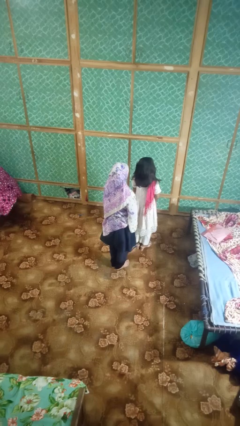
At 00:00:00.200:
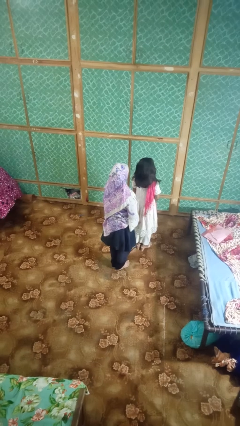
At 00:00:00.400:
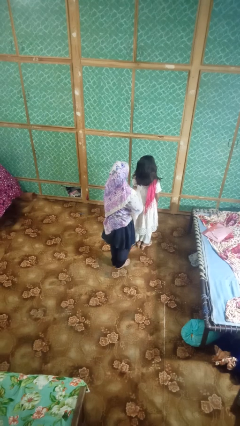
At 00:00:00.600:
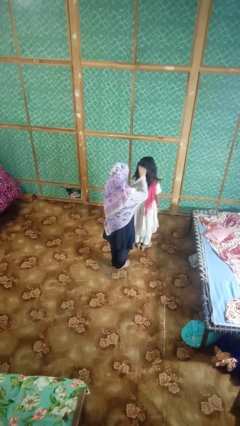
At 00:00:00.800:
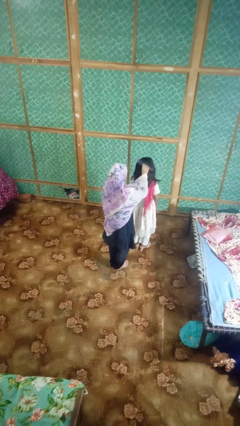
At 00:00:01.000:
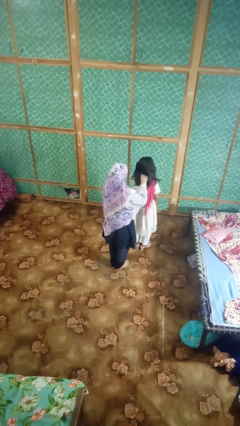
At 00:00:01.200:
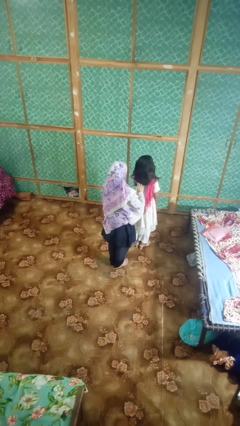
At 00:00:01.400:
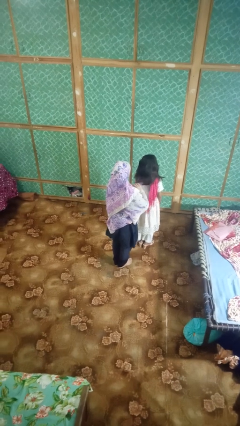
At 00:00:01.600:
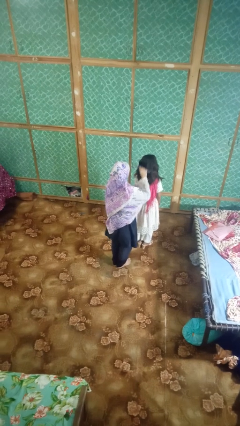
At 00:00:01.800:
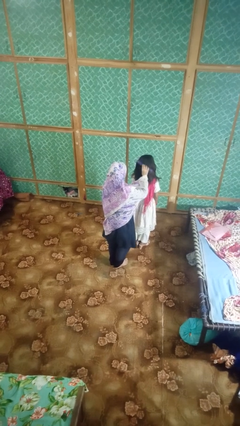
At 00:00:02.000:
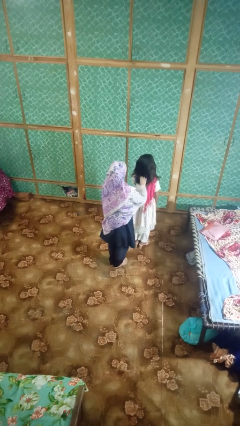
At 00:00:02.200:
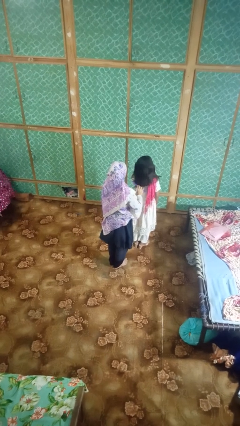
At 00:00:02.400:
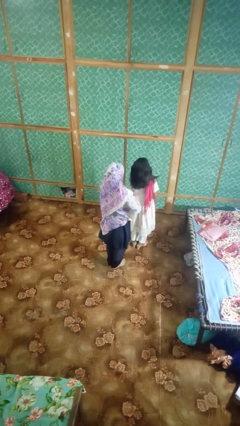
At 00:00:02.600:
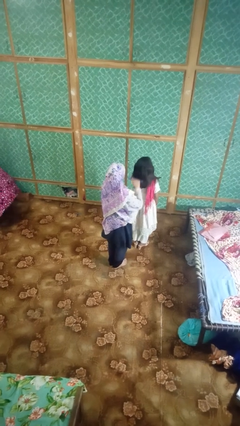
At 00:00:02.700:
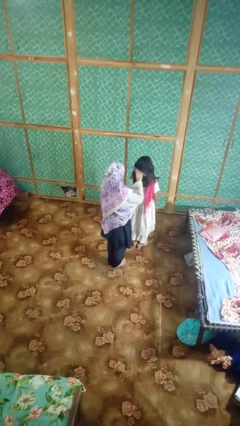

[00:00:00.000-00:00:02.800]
person brushes hair of person

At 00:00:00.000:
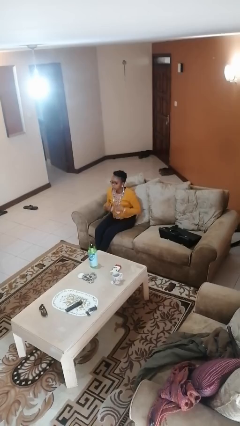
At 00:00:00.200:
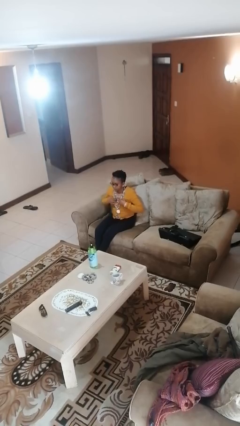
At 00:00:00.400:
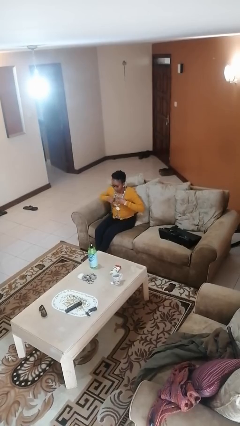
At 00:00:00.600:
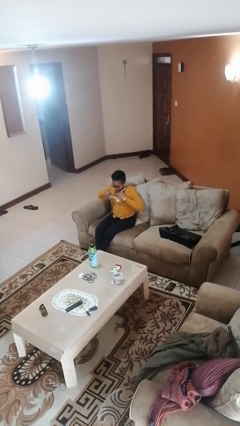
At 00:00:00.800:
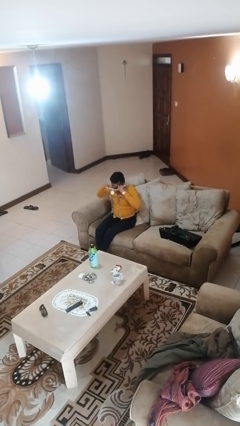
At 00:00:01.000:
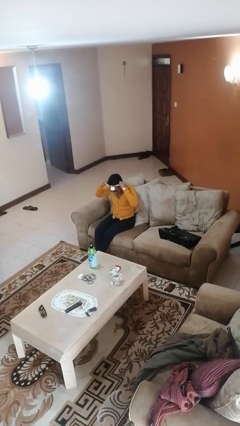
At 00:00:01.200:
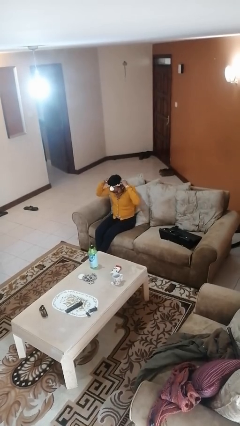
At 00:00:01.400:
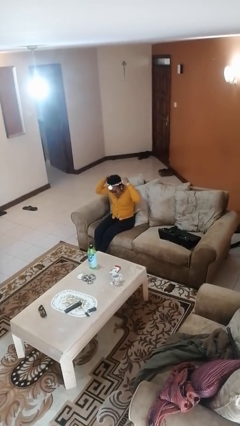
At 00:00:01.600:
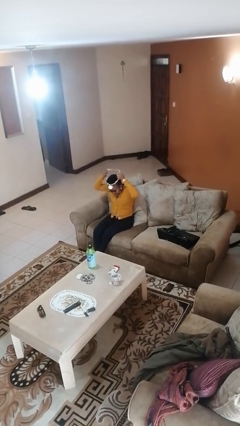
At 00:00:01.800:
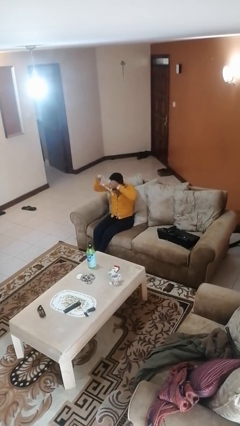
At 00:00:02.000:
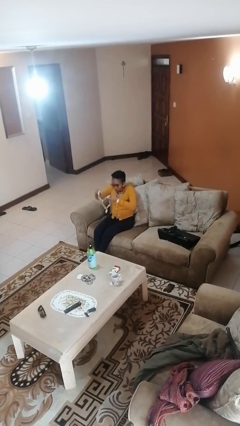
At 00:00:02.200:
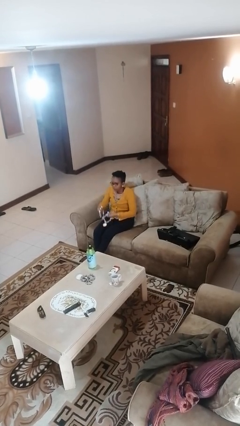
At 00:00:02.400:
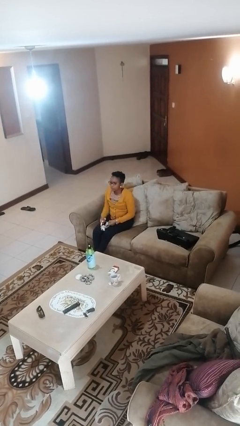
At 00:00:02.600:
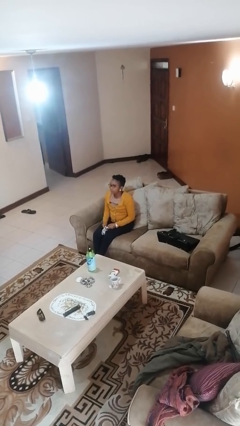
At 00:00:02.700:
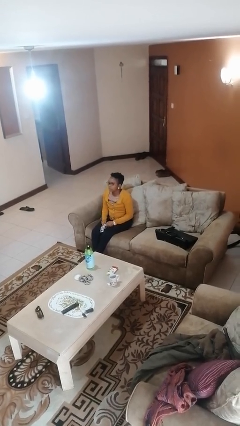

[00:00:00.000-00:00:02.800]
person takes off necklace

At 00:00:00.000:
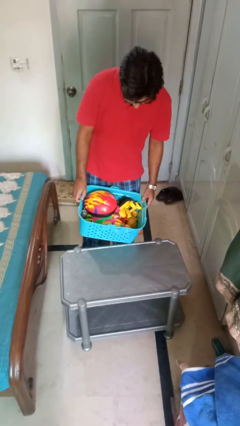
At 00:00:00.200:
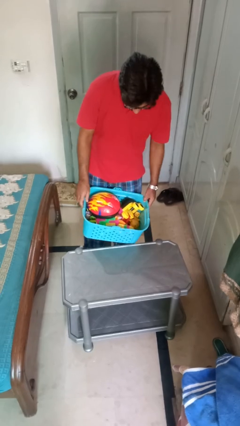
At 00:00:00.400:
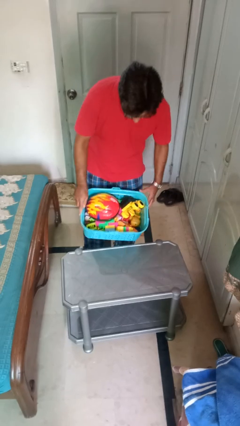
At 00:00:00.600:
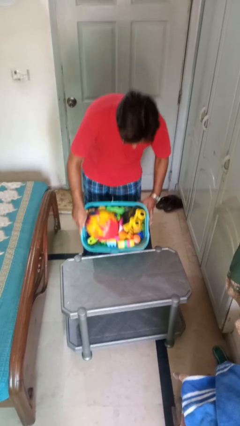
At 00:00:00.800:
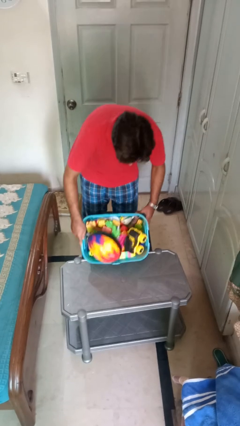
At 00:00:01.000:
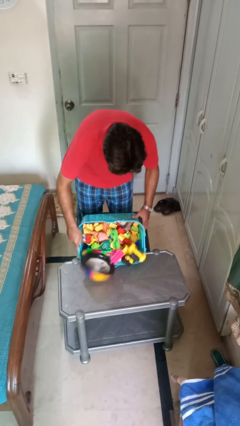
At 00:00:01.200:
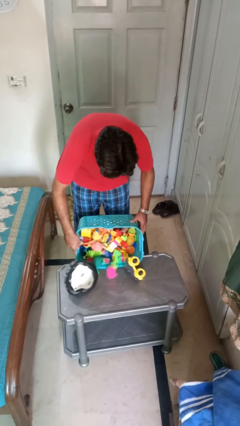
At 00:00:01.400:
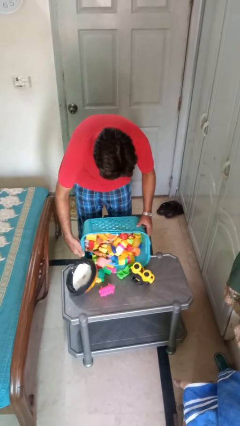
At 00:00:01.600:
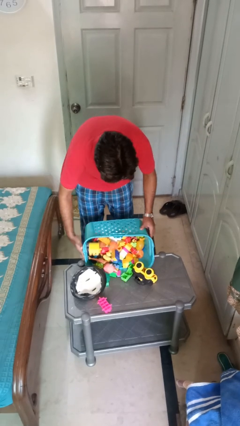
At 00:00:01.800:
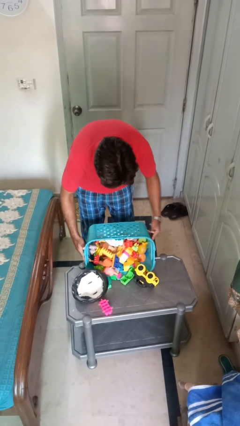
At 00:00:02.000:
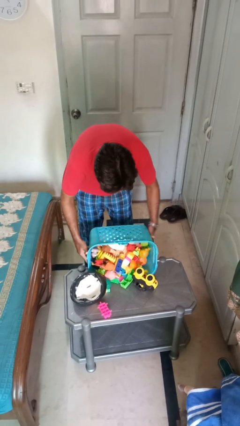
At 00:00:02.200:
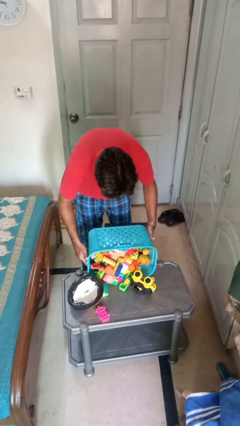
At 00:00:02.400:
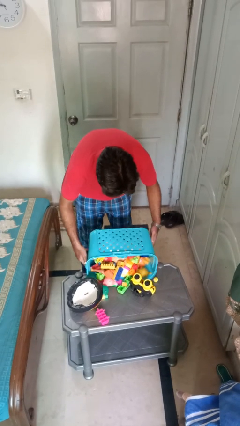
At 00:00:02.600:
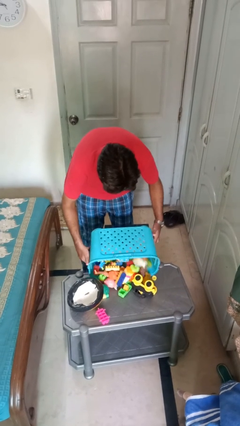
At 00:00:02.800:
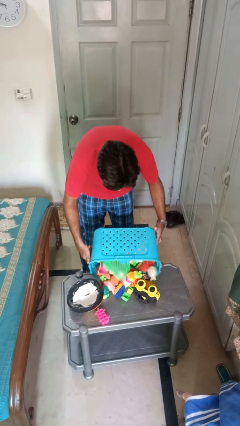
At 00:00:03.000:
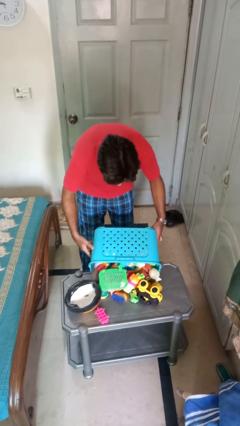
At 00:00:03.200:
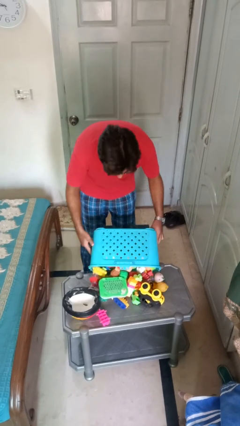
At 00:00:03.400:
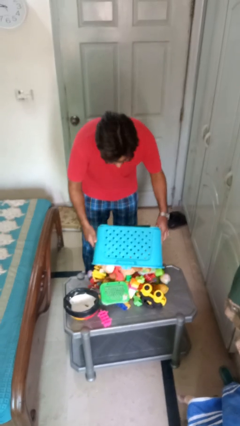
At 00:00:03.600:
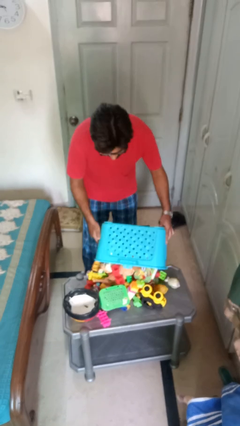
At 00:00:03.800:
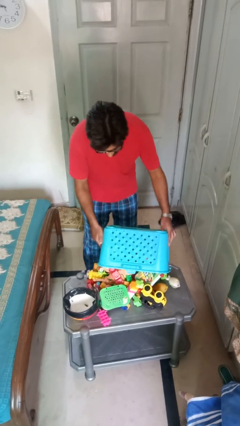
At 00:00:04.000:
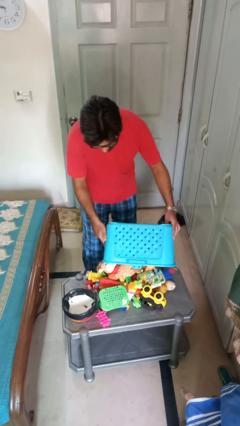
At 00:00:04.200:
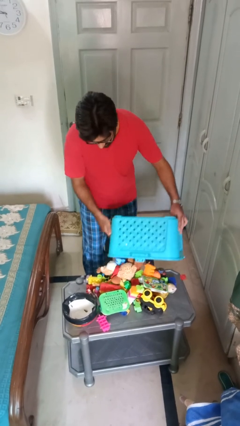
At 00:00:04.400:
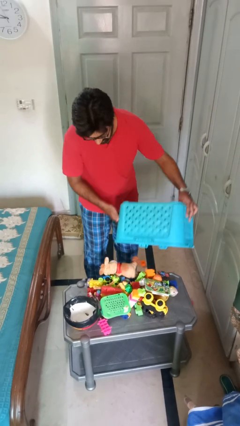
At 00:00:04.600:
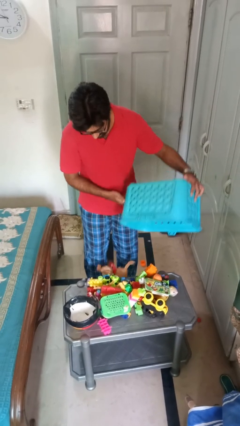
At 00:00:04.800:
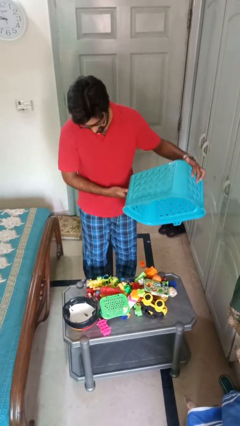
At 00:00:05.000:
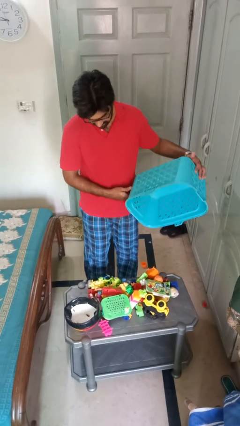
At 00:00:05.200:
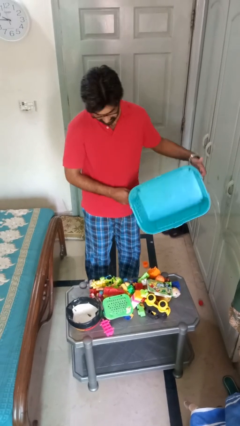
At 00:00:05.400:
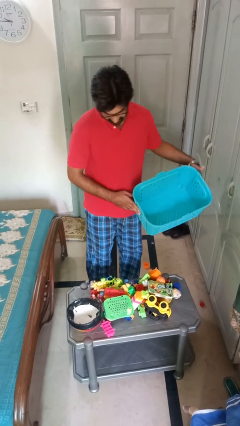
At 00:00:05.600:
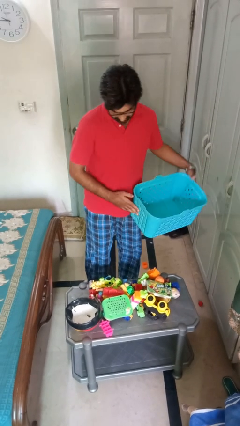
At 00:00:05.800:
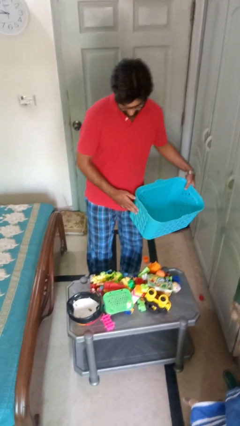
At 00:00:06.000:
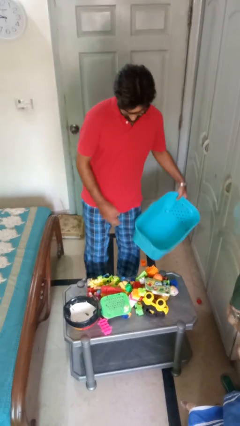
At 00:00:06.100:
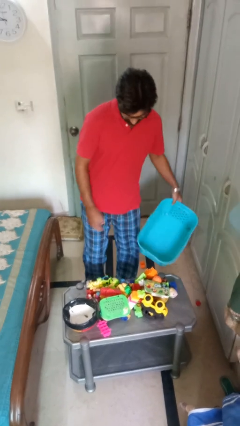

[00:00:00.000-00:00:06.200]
person unloads box onto table

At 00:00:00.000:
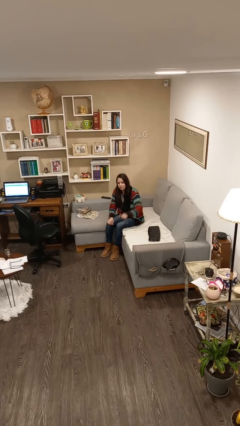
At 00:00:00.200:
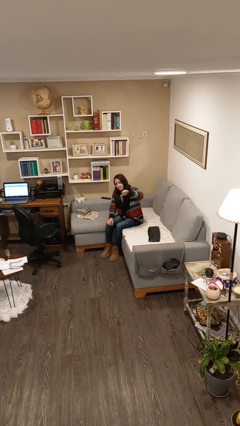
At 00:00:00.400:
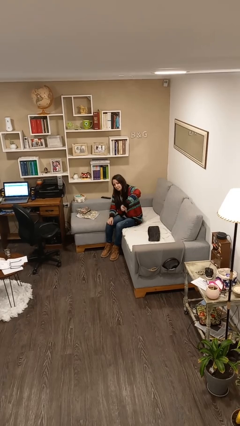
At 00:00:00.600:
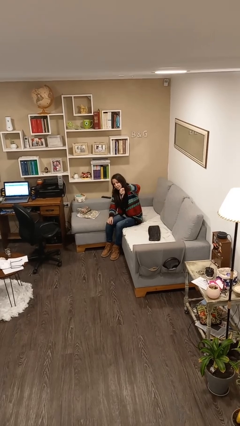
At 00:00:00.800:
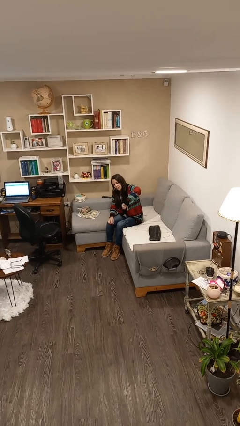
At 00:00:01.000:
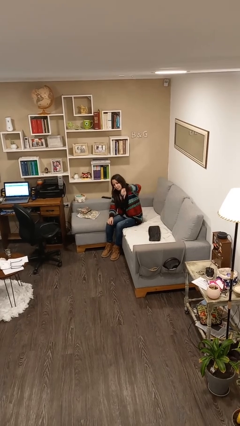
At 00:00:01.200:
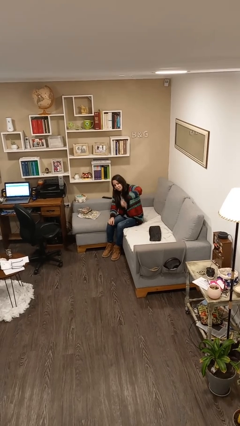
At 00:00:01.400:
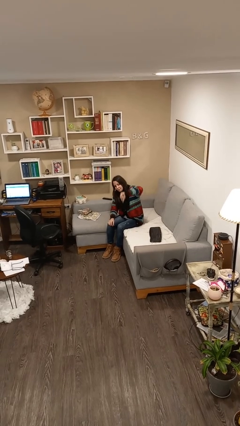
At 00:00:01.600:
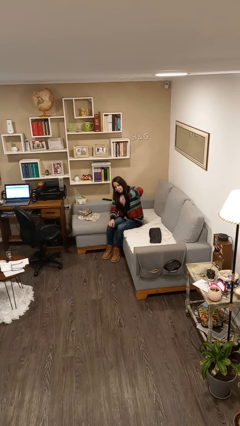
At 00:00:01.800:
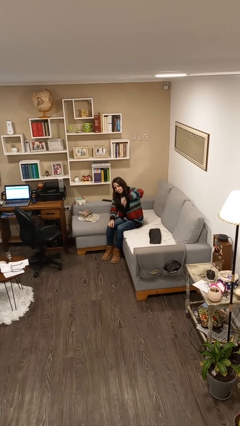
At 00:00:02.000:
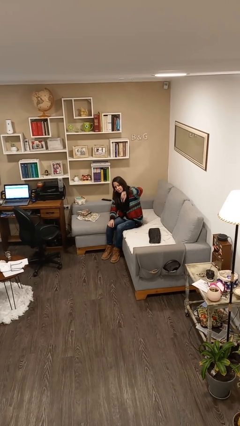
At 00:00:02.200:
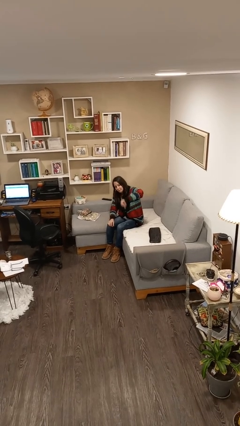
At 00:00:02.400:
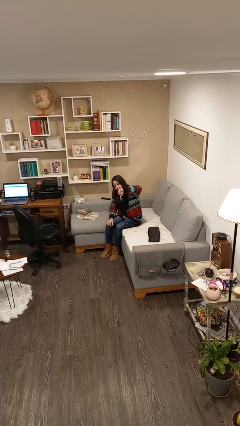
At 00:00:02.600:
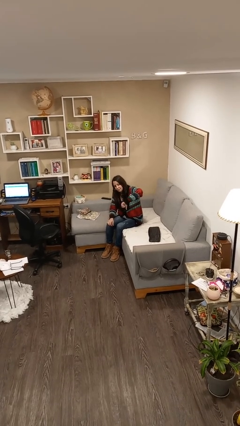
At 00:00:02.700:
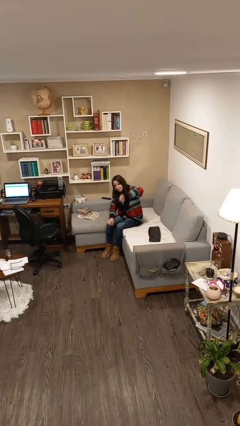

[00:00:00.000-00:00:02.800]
person gestures thumbs down

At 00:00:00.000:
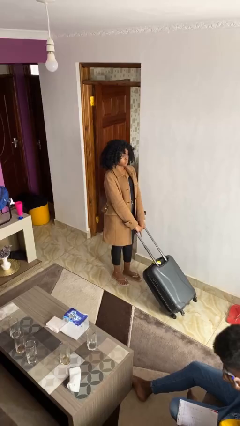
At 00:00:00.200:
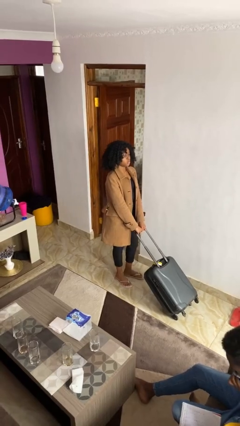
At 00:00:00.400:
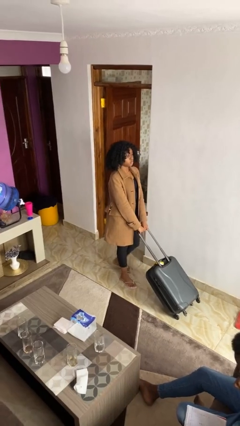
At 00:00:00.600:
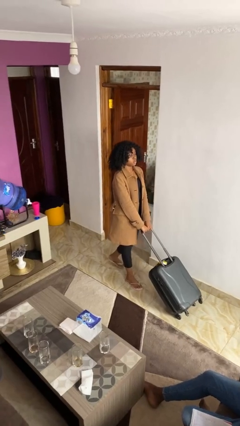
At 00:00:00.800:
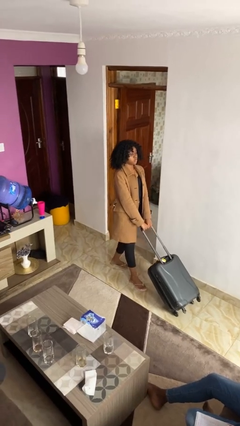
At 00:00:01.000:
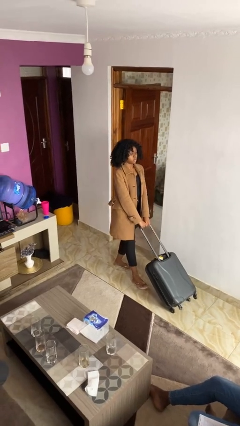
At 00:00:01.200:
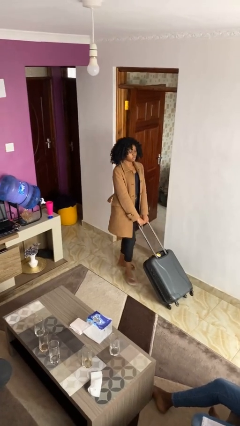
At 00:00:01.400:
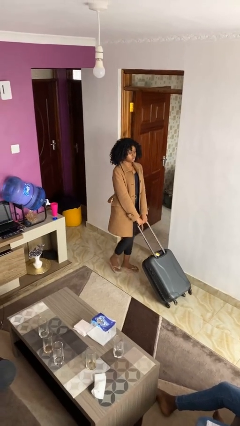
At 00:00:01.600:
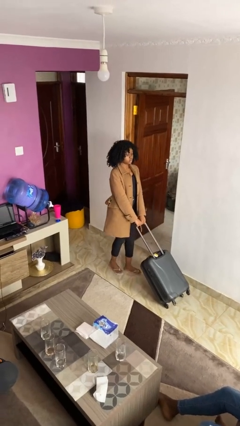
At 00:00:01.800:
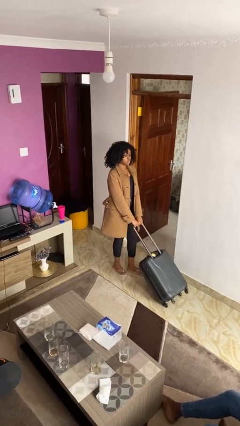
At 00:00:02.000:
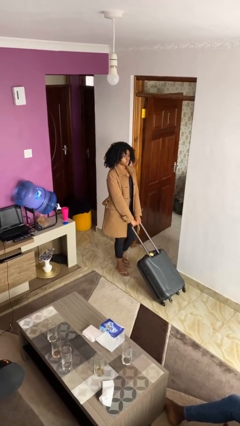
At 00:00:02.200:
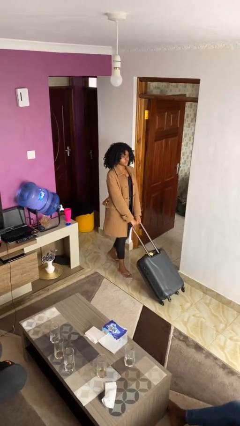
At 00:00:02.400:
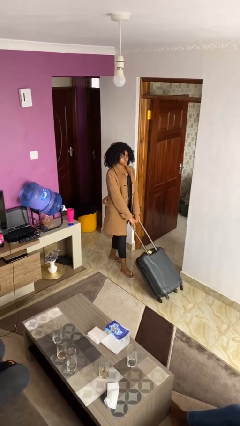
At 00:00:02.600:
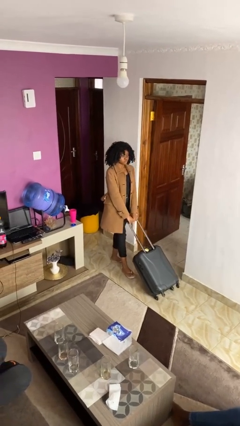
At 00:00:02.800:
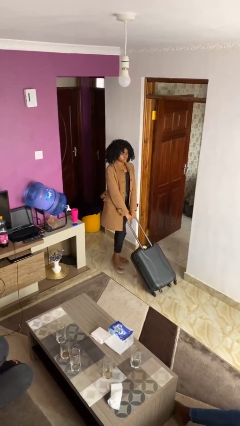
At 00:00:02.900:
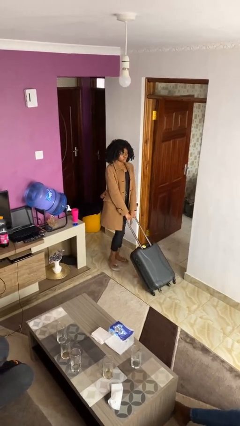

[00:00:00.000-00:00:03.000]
person pulls wheeled cart
